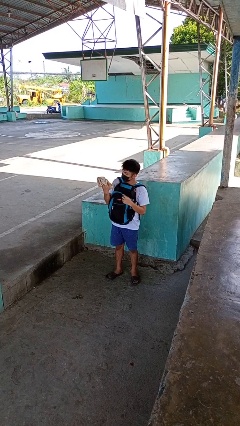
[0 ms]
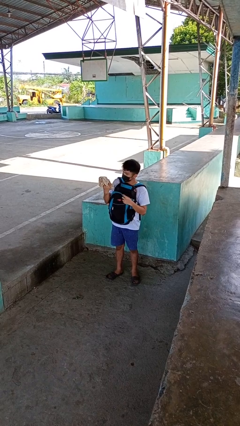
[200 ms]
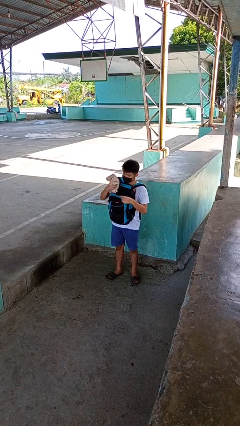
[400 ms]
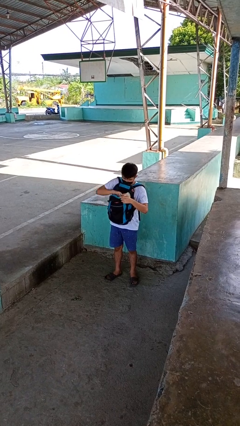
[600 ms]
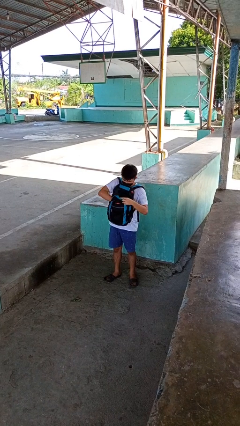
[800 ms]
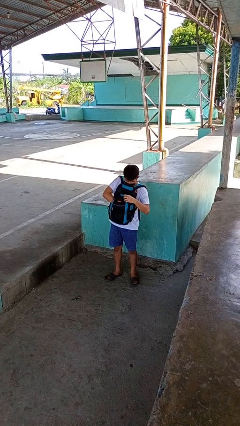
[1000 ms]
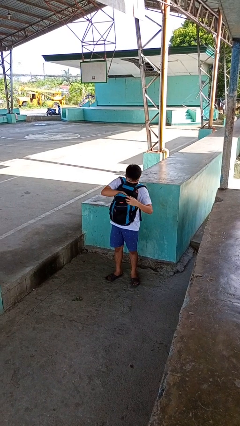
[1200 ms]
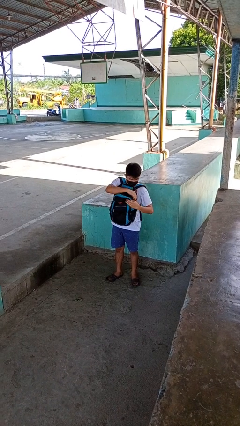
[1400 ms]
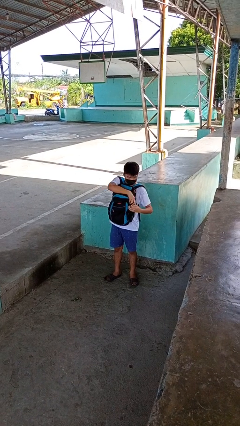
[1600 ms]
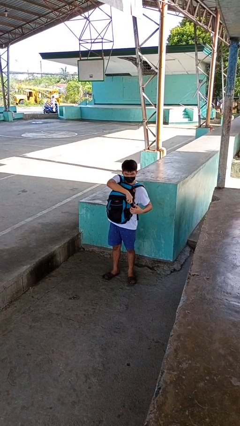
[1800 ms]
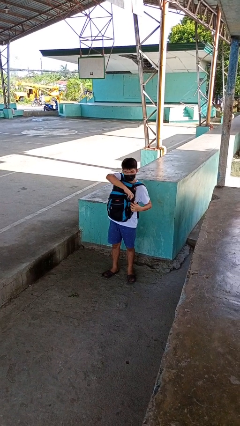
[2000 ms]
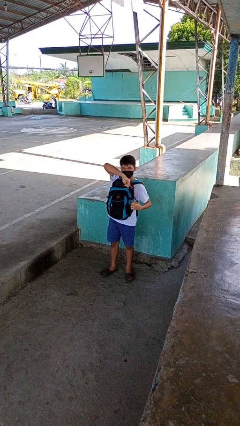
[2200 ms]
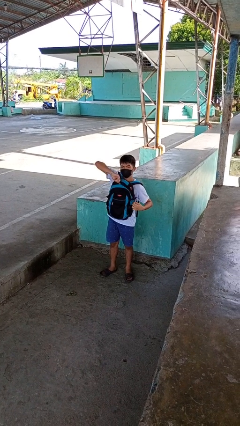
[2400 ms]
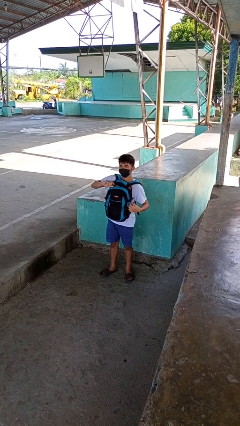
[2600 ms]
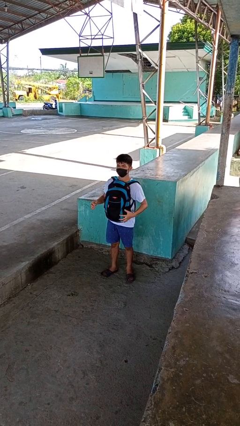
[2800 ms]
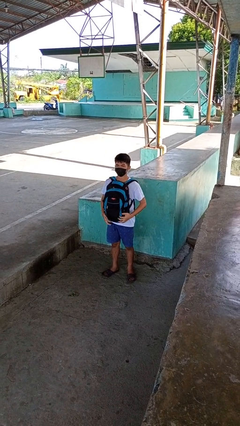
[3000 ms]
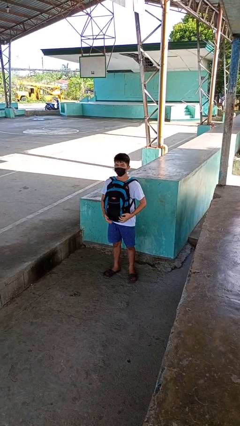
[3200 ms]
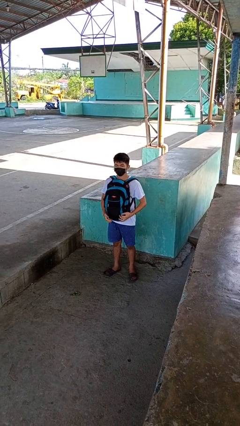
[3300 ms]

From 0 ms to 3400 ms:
person puts object into backpack

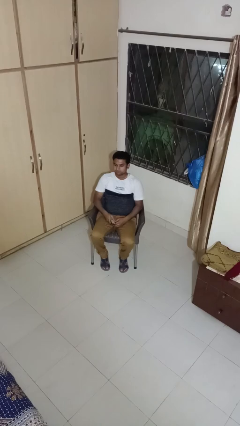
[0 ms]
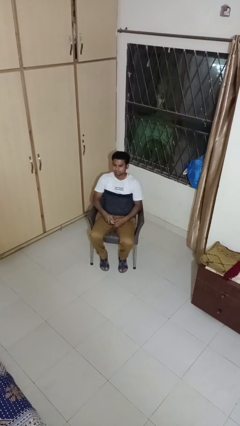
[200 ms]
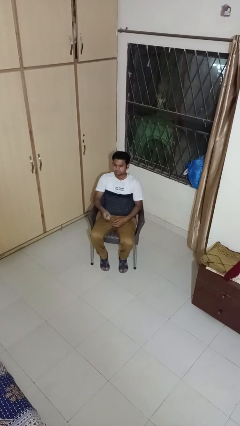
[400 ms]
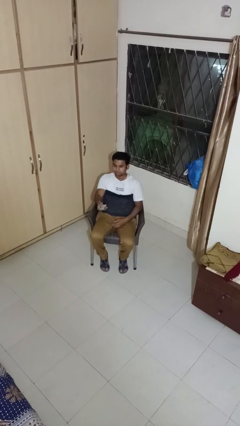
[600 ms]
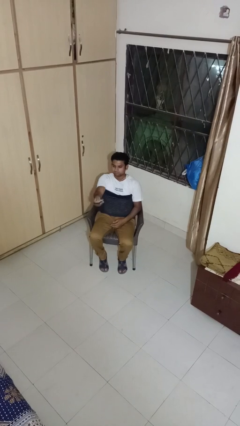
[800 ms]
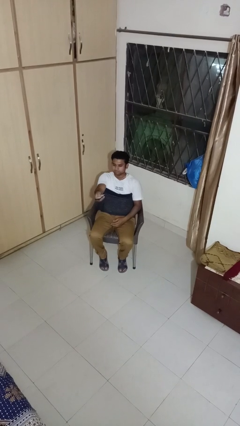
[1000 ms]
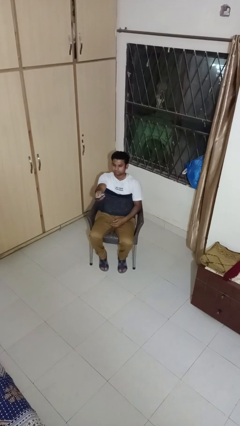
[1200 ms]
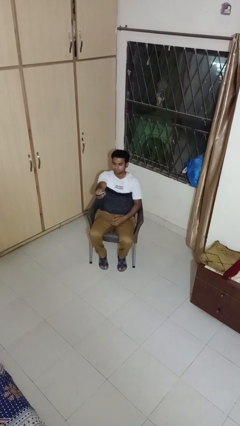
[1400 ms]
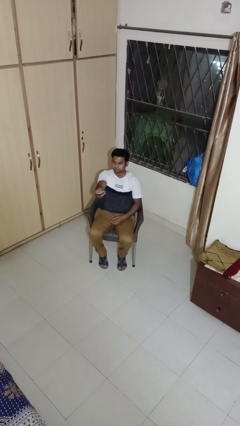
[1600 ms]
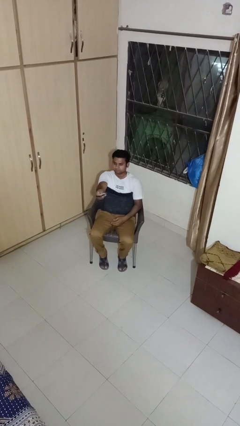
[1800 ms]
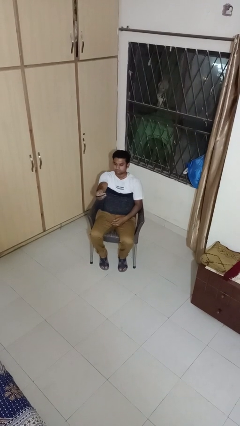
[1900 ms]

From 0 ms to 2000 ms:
person uses television remote

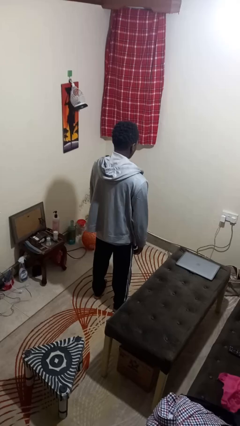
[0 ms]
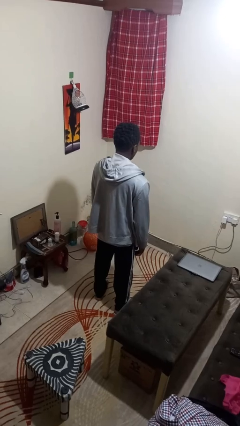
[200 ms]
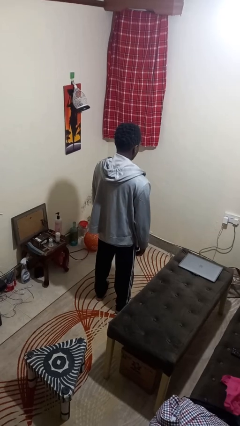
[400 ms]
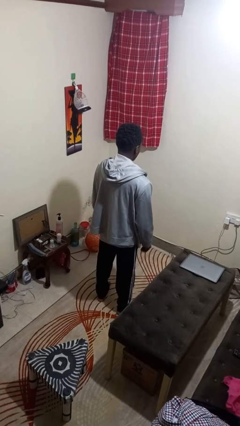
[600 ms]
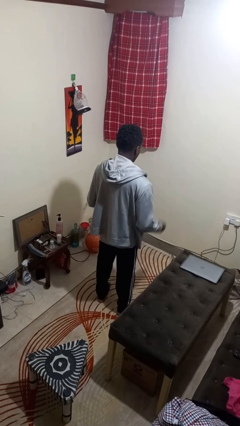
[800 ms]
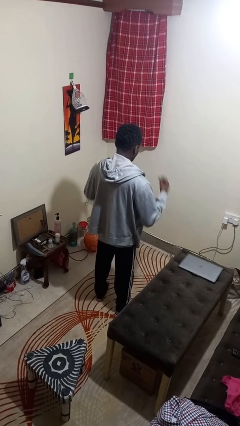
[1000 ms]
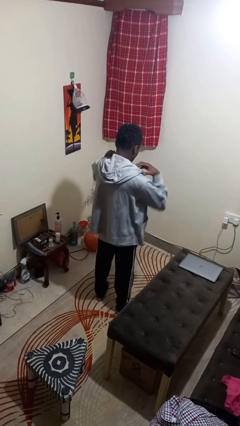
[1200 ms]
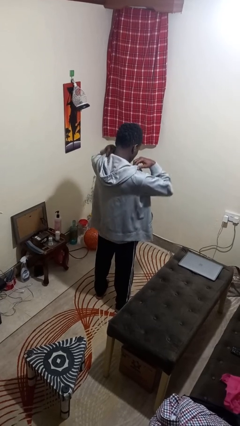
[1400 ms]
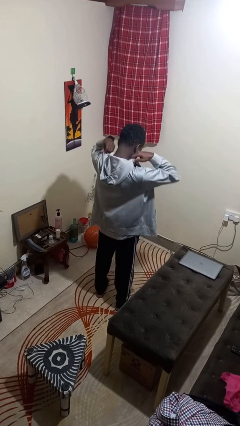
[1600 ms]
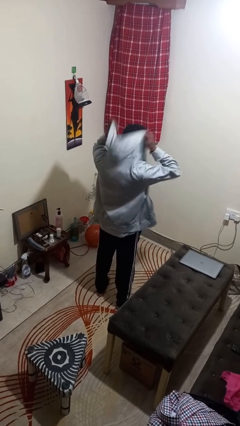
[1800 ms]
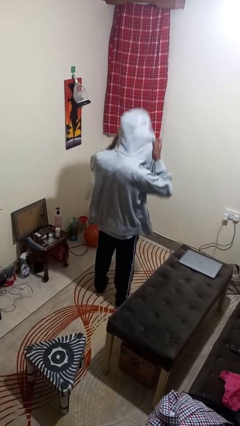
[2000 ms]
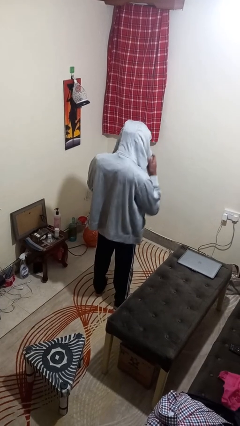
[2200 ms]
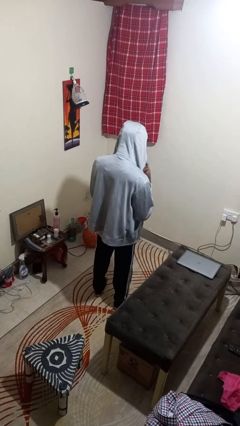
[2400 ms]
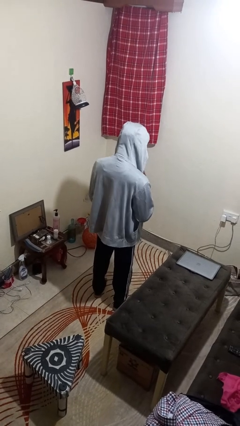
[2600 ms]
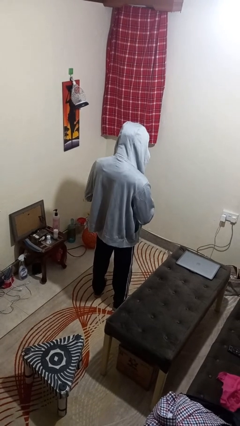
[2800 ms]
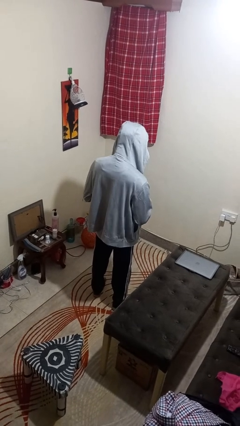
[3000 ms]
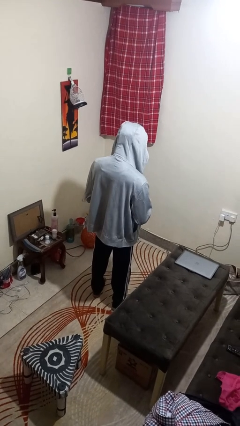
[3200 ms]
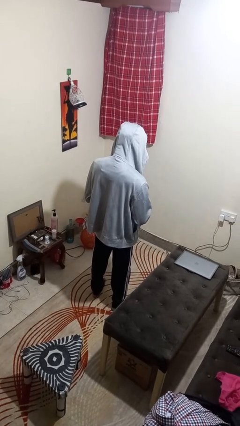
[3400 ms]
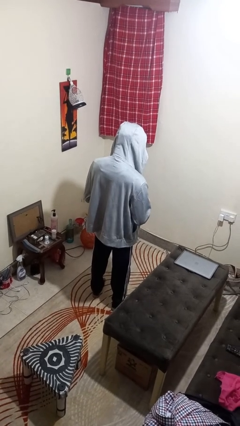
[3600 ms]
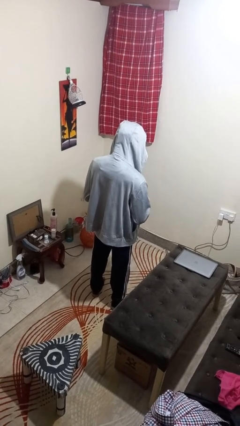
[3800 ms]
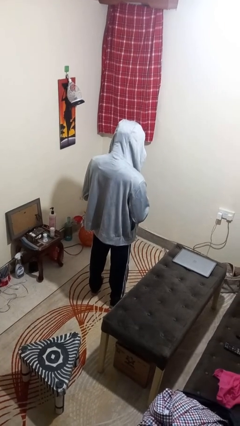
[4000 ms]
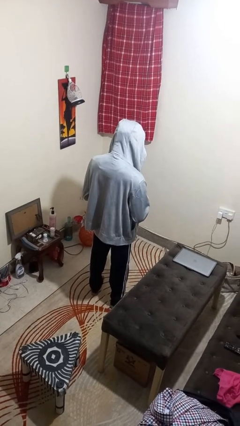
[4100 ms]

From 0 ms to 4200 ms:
person puts on hoodie

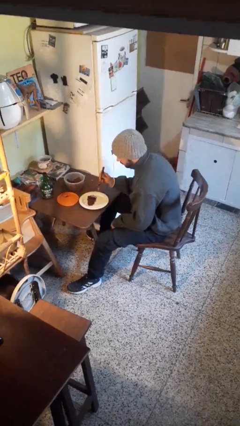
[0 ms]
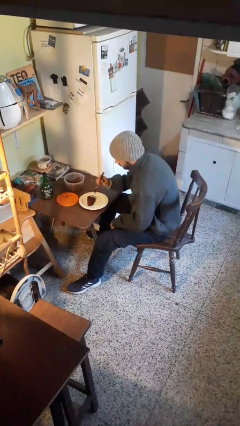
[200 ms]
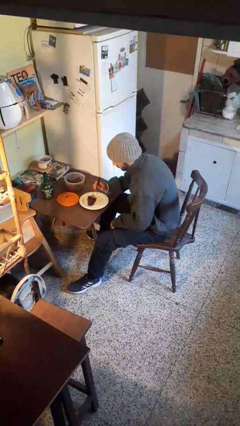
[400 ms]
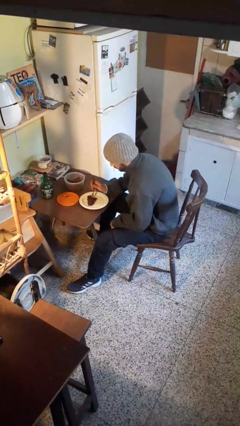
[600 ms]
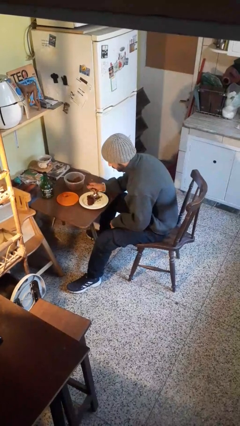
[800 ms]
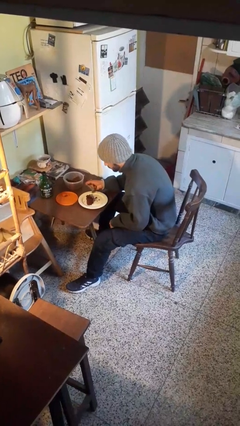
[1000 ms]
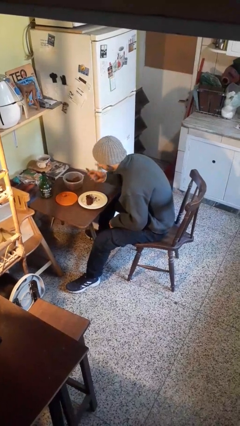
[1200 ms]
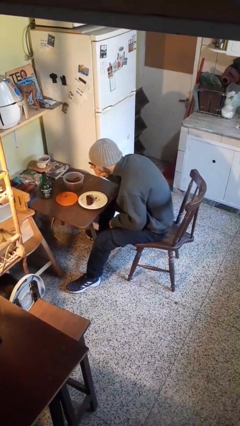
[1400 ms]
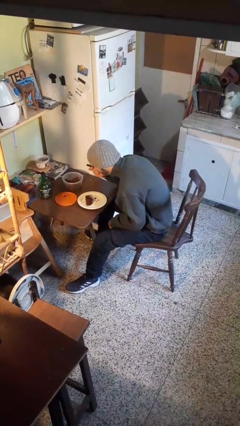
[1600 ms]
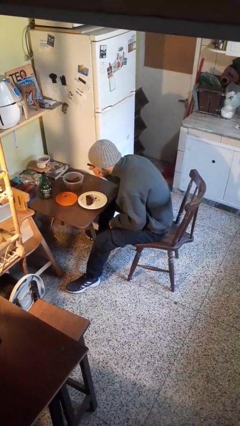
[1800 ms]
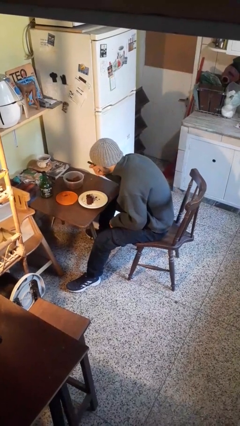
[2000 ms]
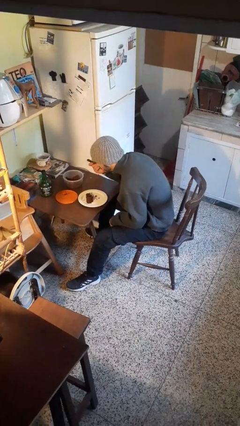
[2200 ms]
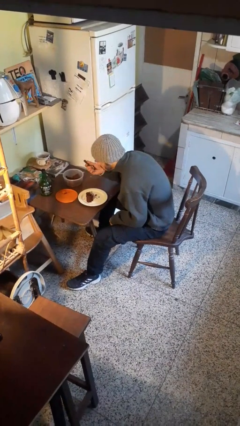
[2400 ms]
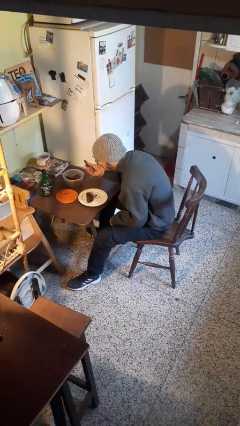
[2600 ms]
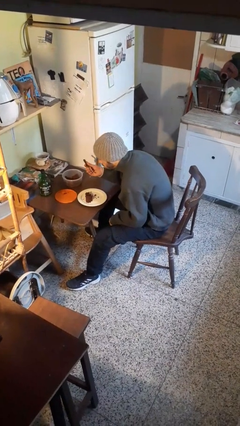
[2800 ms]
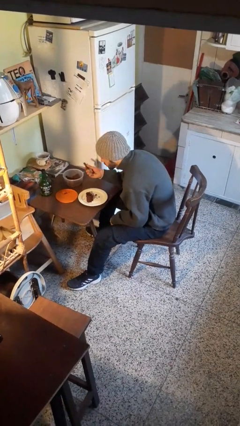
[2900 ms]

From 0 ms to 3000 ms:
person eats with utensil

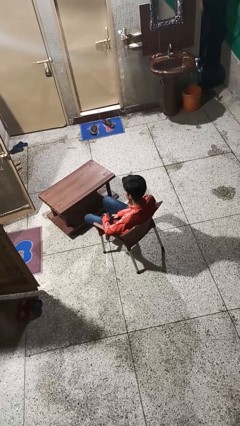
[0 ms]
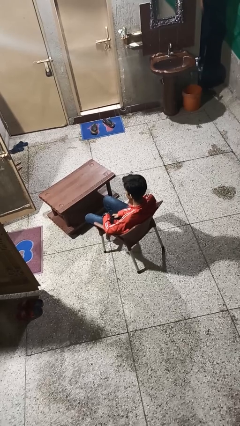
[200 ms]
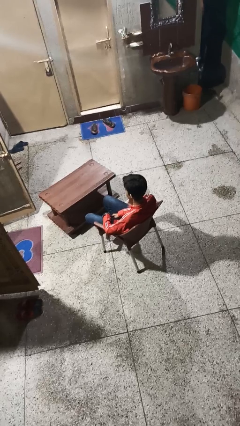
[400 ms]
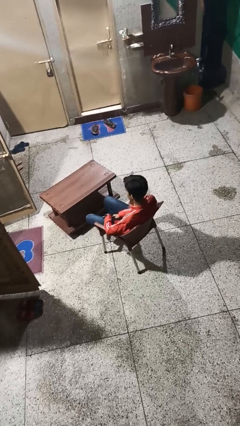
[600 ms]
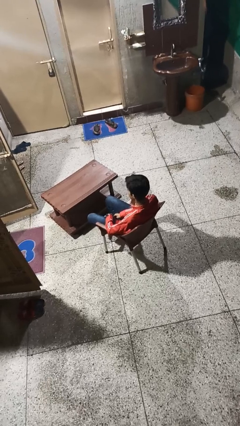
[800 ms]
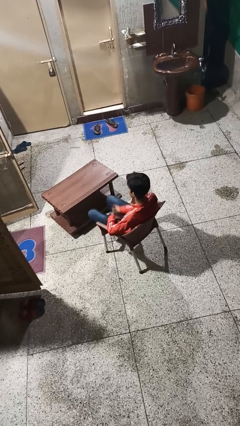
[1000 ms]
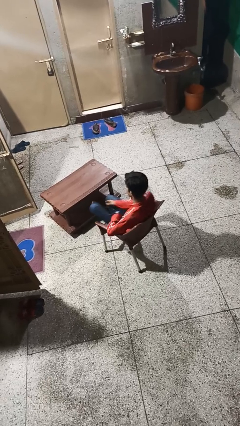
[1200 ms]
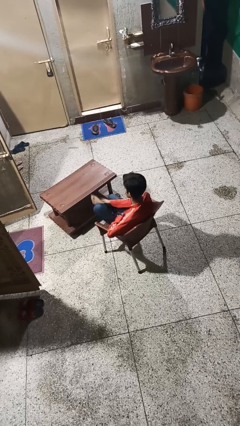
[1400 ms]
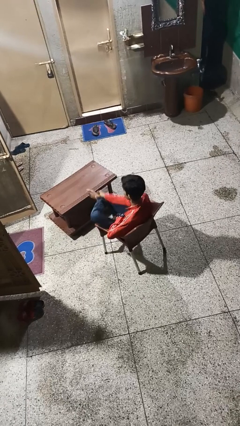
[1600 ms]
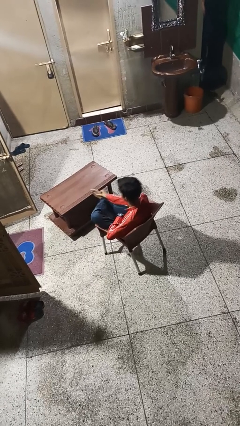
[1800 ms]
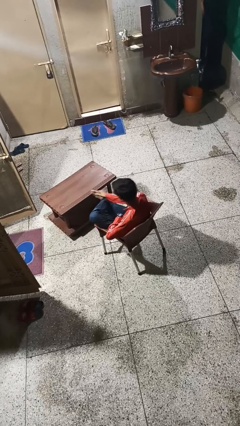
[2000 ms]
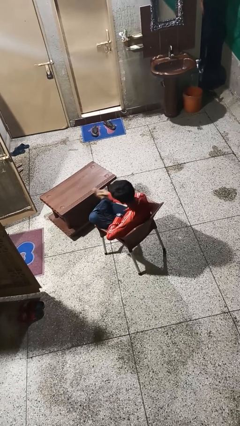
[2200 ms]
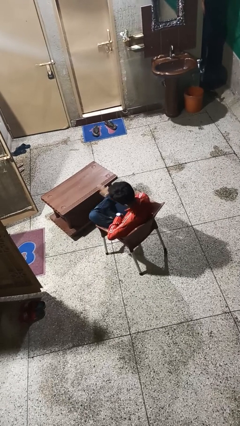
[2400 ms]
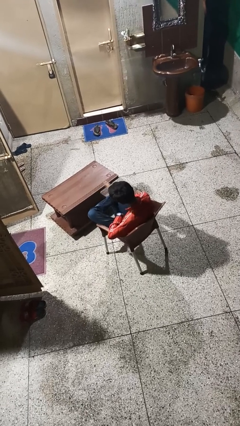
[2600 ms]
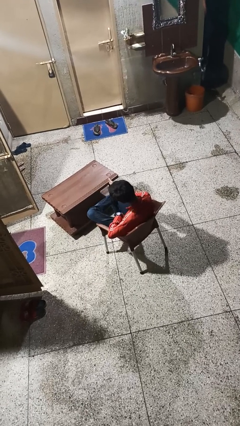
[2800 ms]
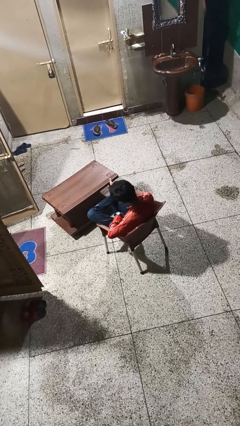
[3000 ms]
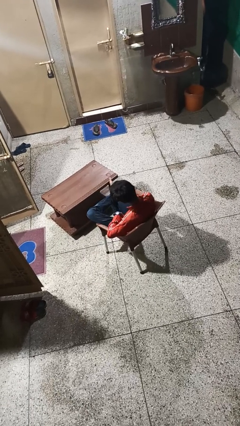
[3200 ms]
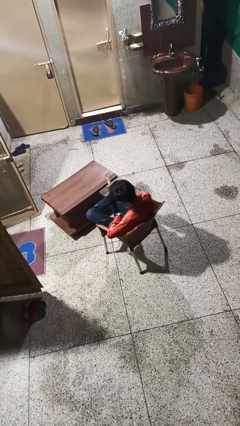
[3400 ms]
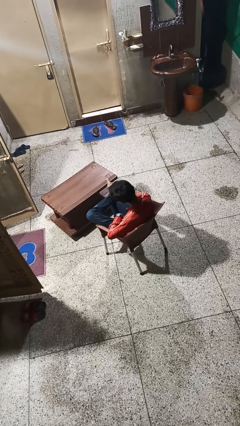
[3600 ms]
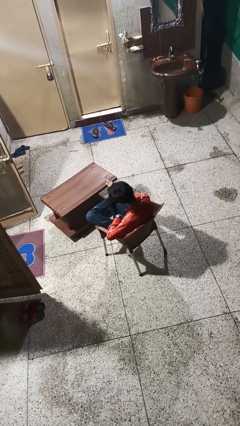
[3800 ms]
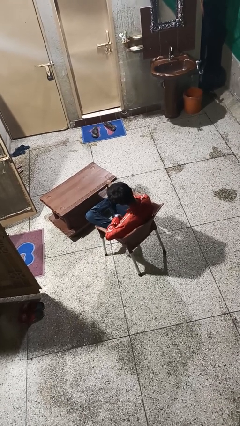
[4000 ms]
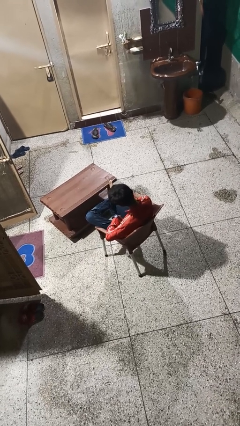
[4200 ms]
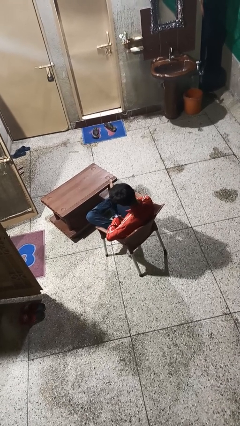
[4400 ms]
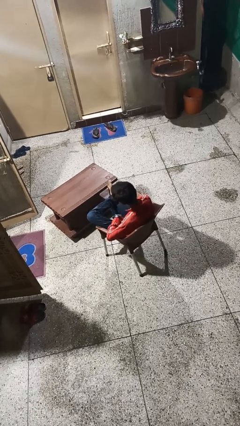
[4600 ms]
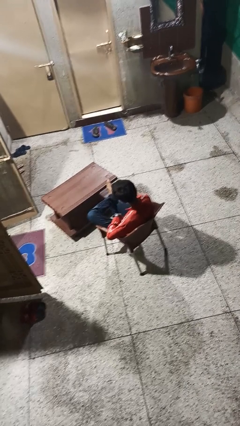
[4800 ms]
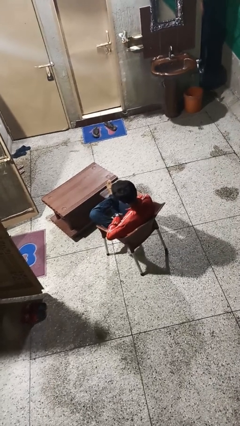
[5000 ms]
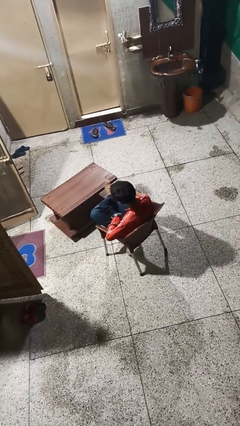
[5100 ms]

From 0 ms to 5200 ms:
person rubs foot
